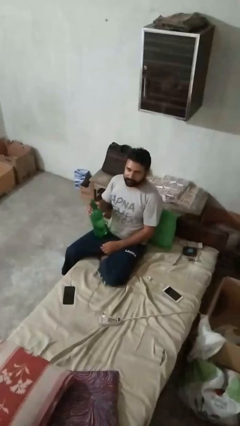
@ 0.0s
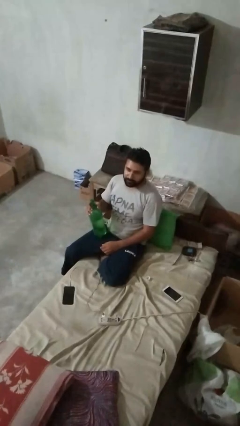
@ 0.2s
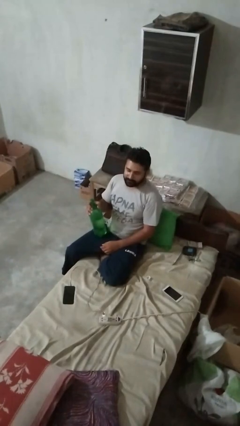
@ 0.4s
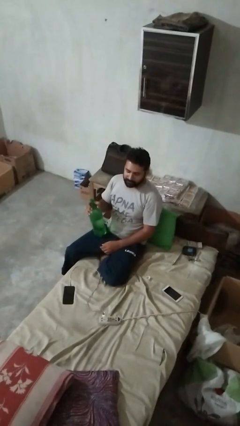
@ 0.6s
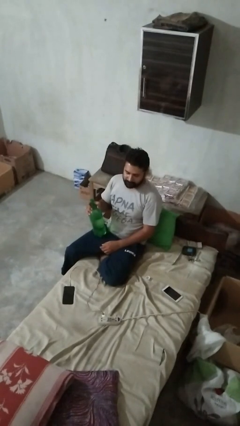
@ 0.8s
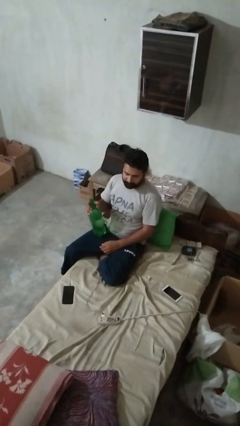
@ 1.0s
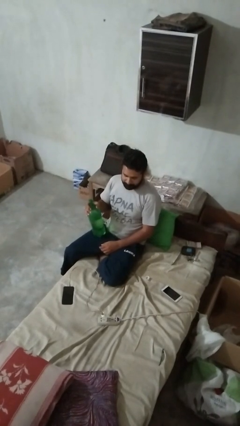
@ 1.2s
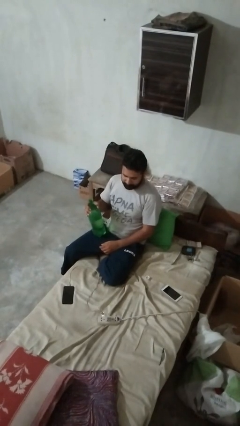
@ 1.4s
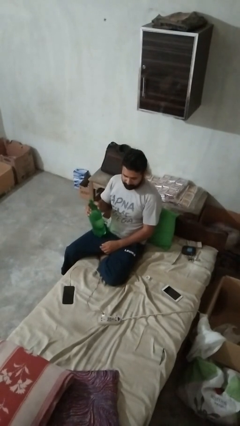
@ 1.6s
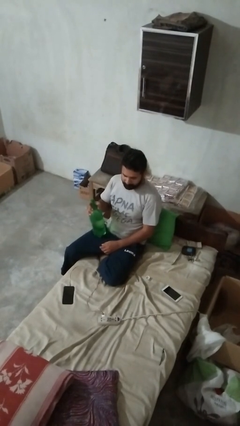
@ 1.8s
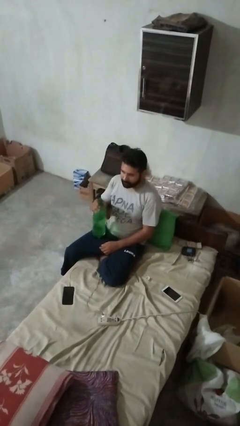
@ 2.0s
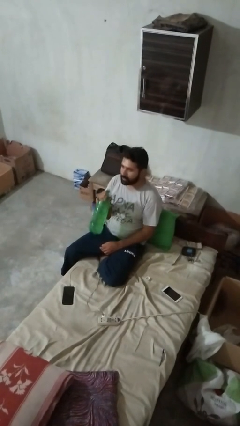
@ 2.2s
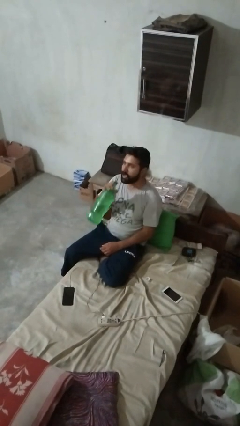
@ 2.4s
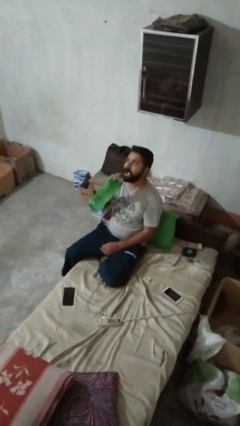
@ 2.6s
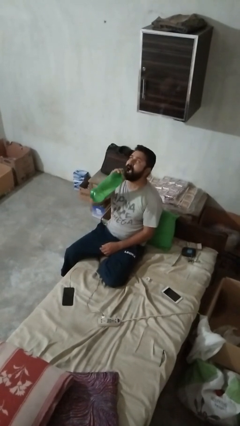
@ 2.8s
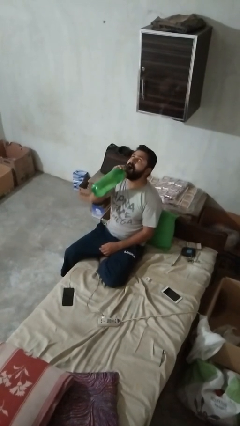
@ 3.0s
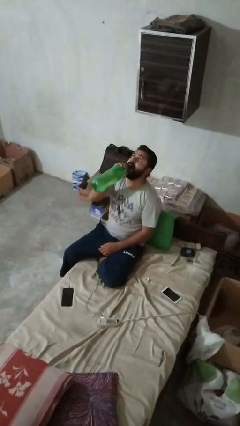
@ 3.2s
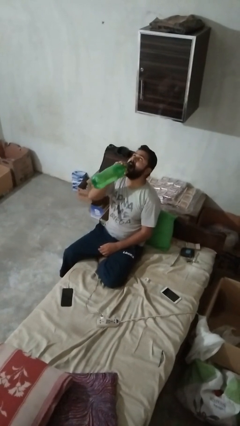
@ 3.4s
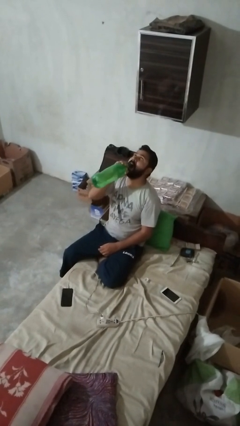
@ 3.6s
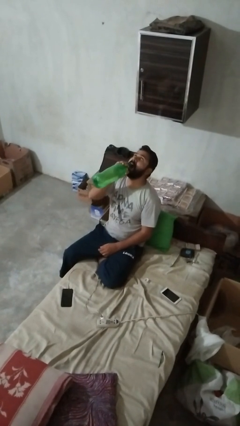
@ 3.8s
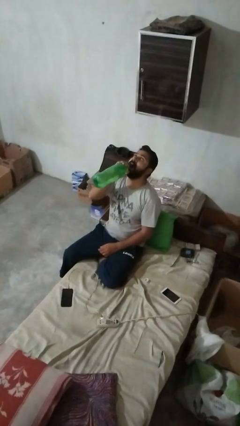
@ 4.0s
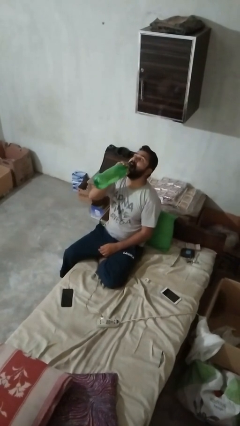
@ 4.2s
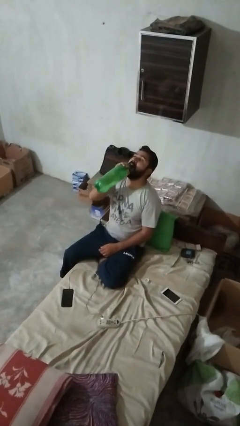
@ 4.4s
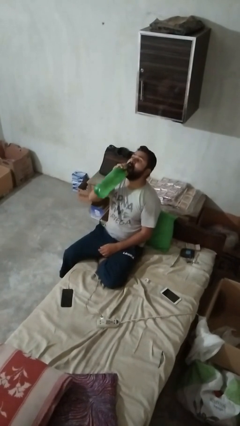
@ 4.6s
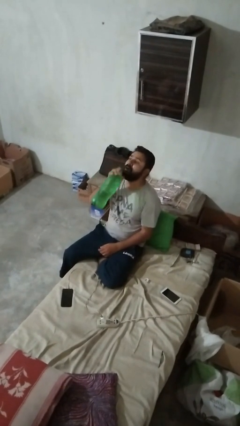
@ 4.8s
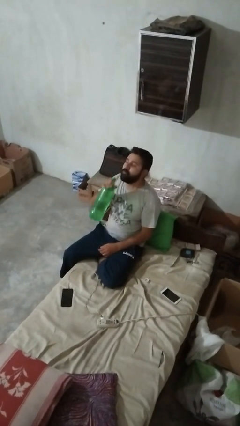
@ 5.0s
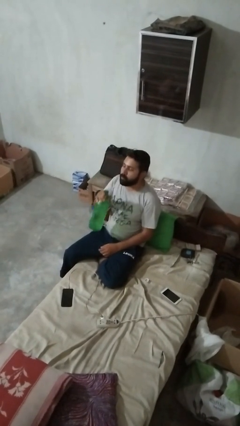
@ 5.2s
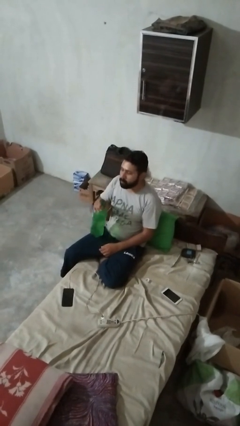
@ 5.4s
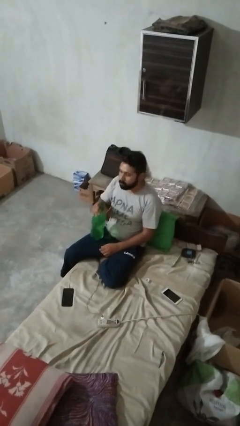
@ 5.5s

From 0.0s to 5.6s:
person drinks from bottle

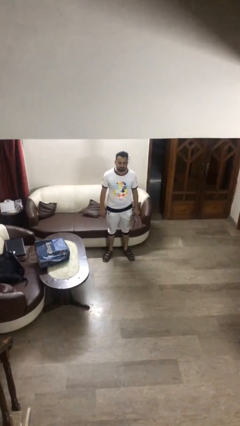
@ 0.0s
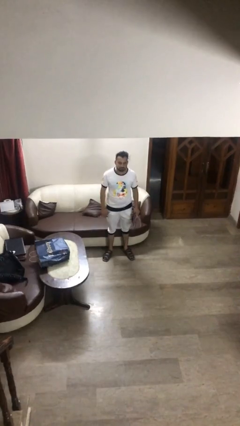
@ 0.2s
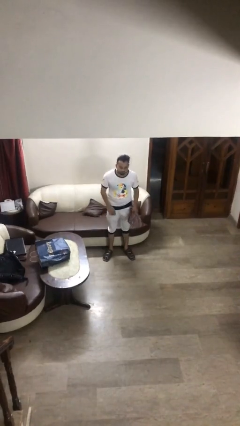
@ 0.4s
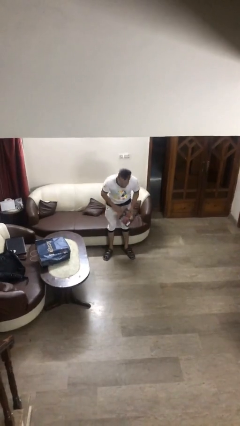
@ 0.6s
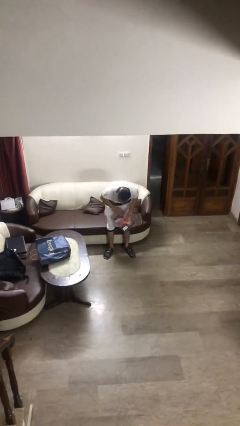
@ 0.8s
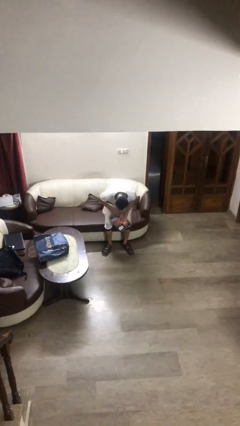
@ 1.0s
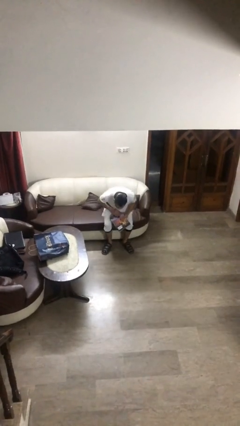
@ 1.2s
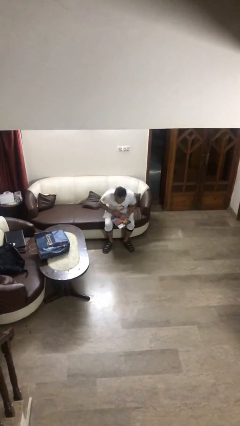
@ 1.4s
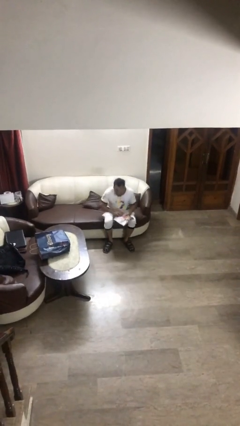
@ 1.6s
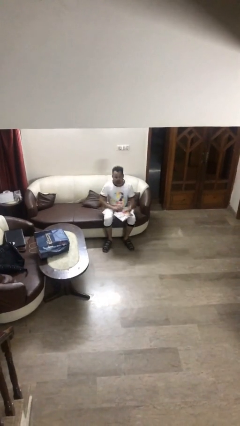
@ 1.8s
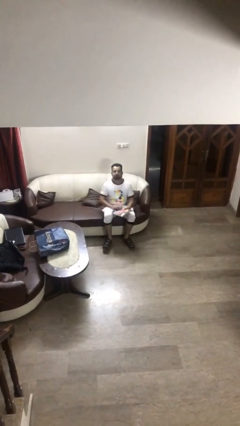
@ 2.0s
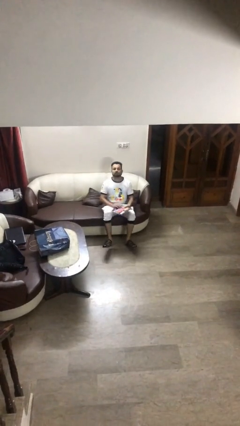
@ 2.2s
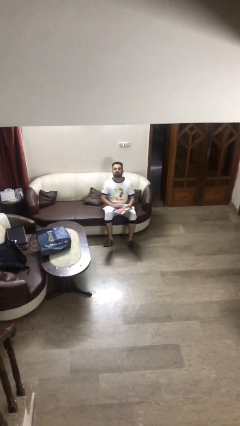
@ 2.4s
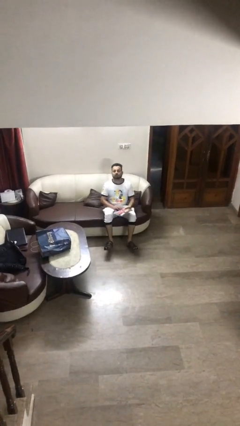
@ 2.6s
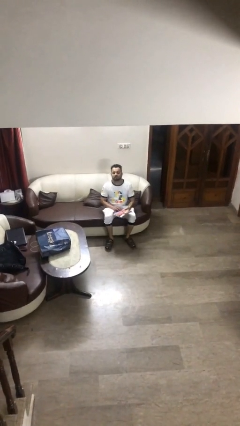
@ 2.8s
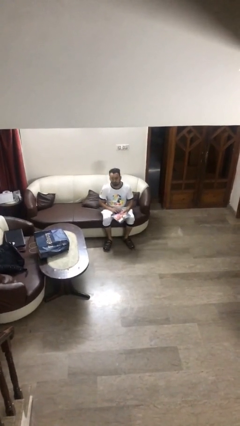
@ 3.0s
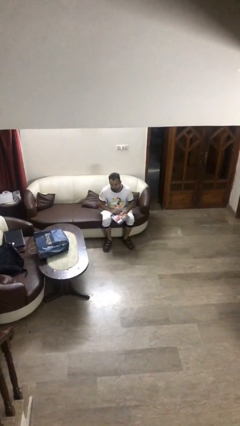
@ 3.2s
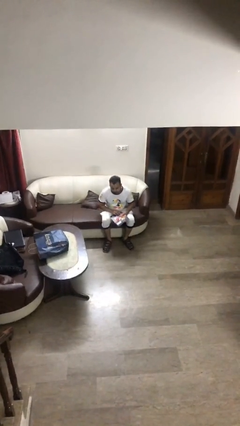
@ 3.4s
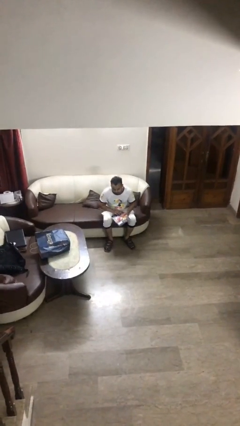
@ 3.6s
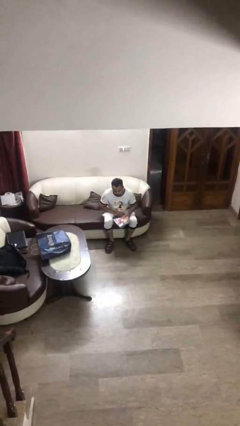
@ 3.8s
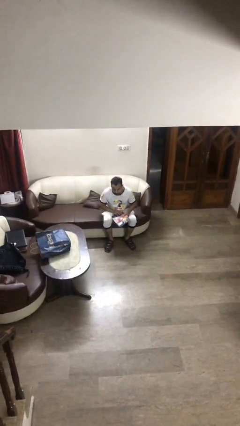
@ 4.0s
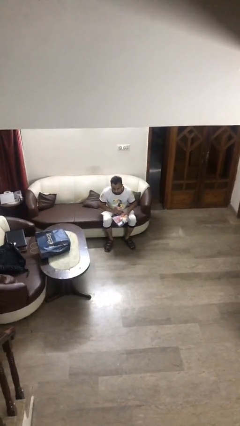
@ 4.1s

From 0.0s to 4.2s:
person sits down

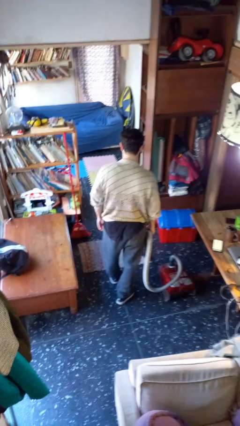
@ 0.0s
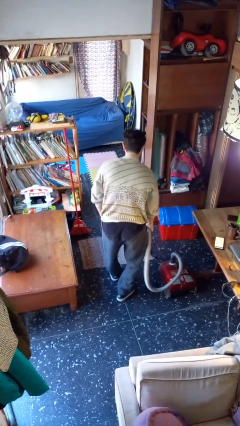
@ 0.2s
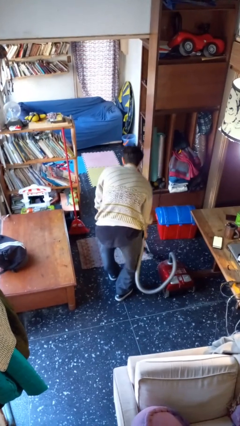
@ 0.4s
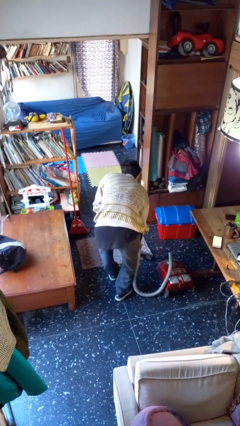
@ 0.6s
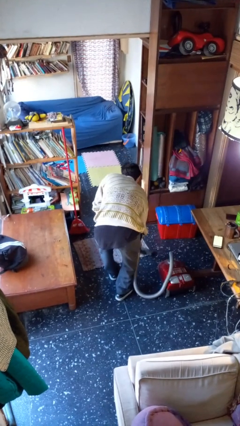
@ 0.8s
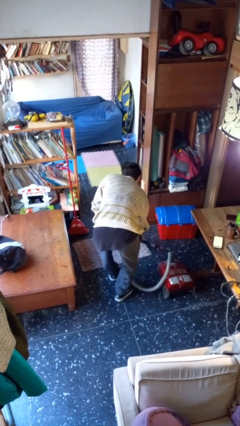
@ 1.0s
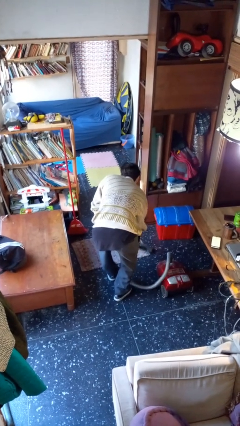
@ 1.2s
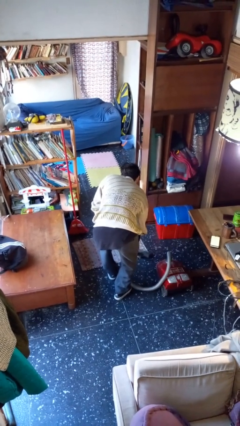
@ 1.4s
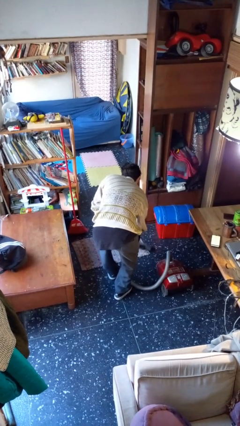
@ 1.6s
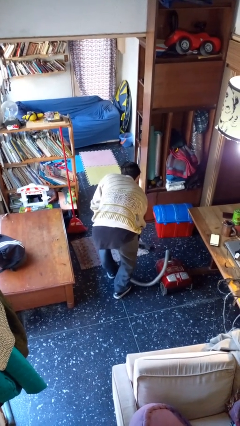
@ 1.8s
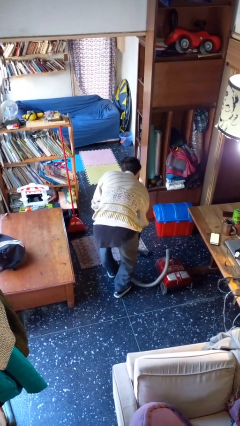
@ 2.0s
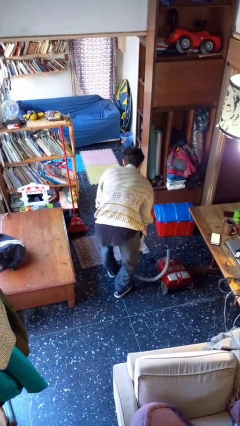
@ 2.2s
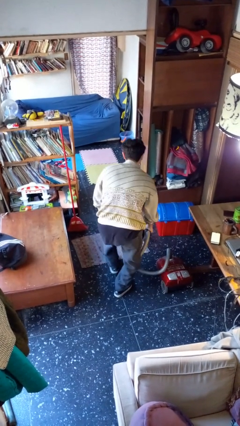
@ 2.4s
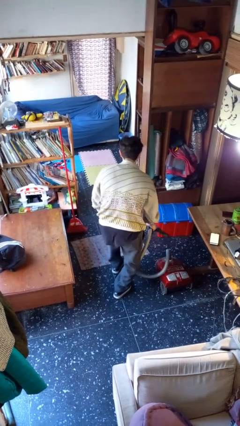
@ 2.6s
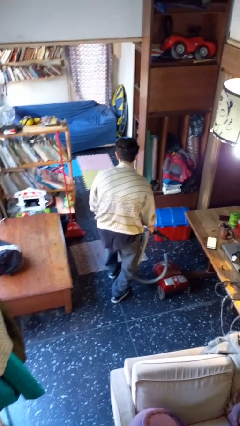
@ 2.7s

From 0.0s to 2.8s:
person vacuums carpet

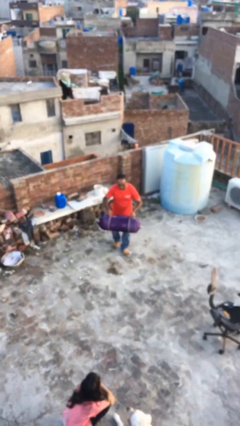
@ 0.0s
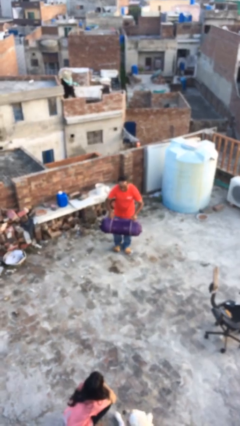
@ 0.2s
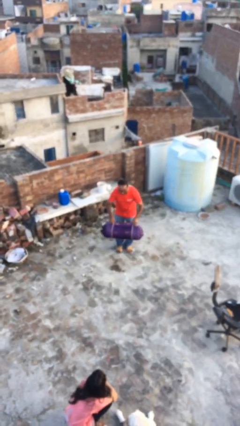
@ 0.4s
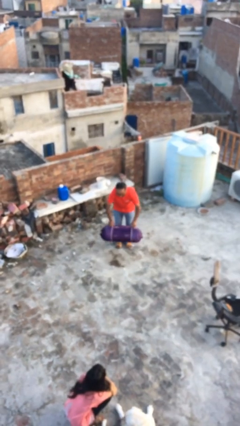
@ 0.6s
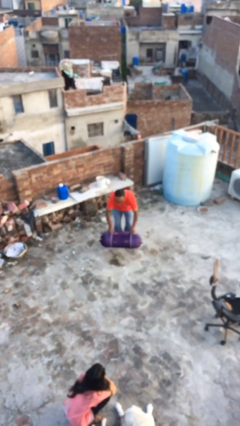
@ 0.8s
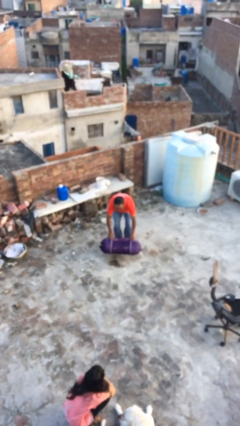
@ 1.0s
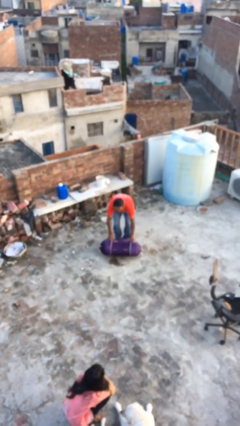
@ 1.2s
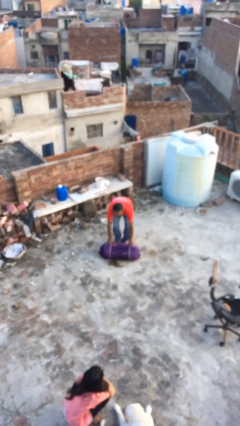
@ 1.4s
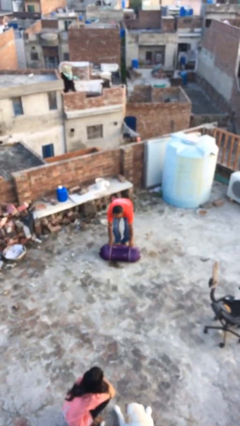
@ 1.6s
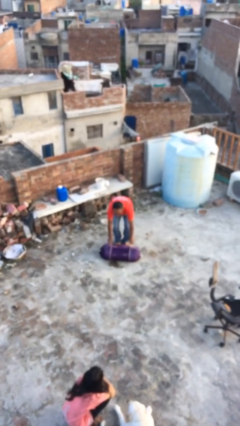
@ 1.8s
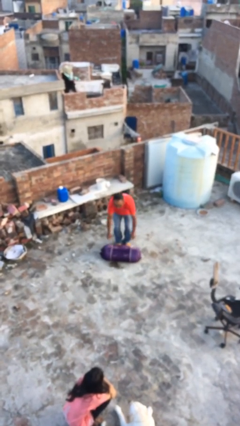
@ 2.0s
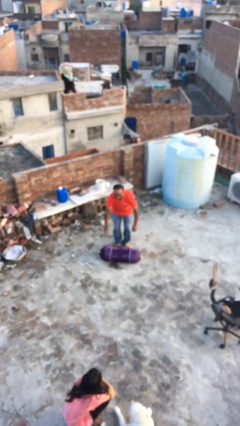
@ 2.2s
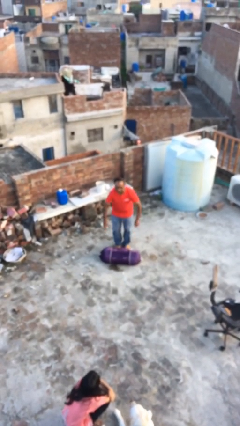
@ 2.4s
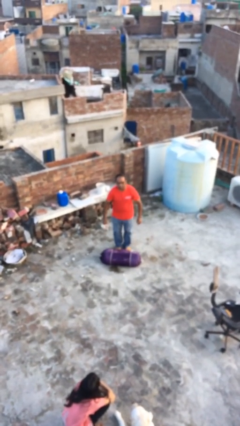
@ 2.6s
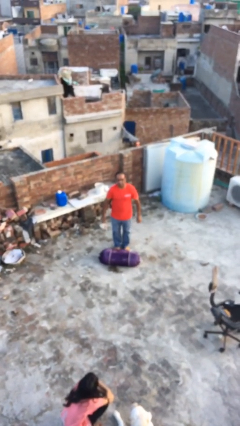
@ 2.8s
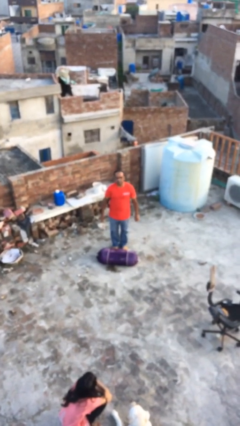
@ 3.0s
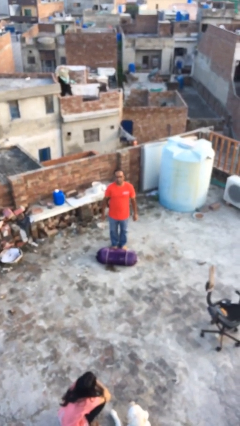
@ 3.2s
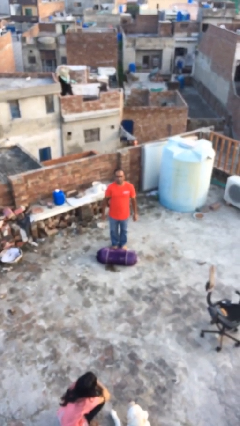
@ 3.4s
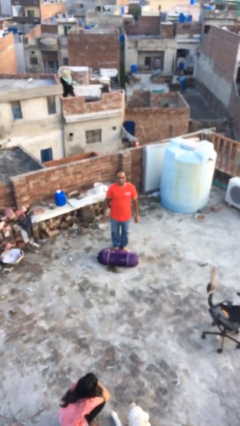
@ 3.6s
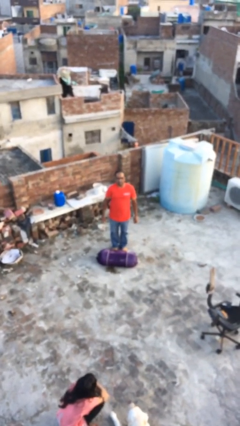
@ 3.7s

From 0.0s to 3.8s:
person puts down object on floor

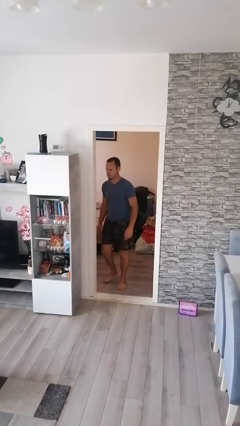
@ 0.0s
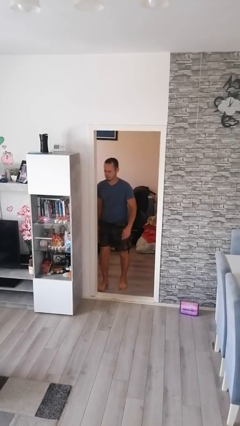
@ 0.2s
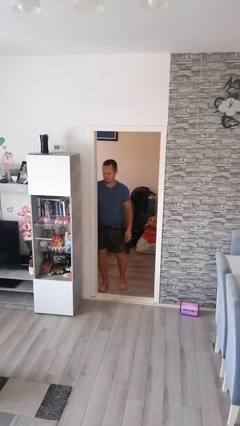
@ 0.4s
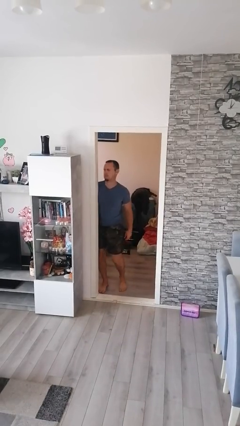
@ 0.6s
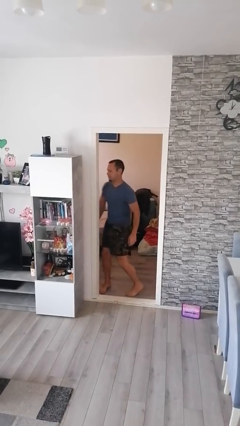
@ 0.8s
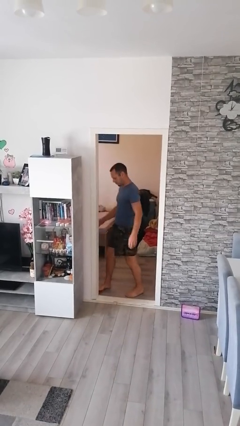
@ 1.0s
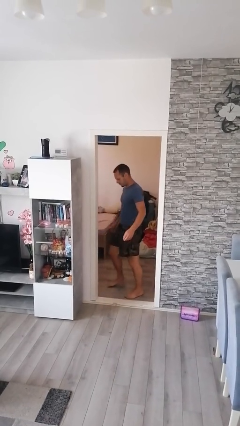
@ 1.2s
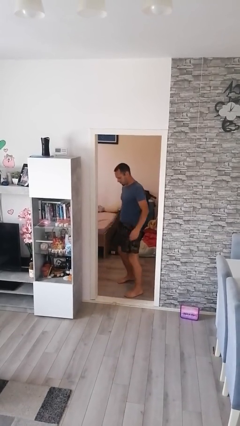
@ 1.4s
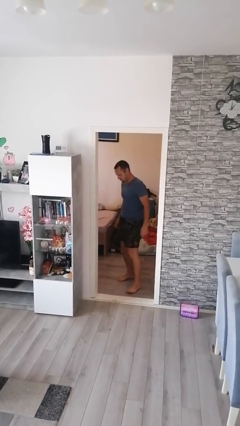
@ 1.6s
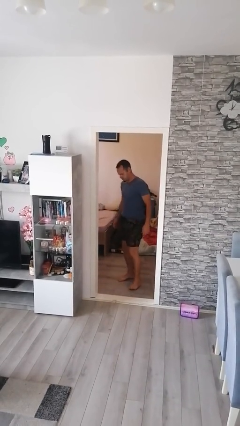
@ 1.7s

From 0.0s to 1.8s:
person bumps into wall
